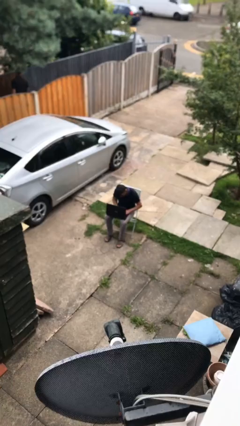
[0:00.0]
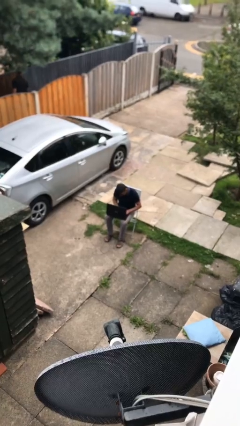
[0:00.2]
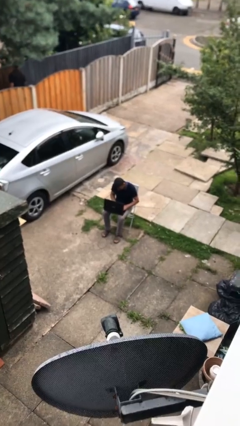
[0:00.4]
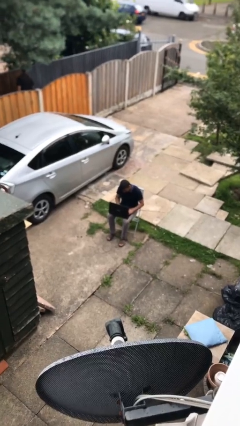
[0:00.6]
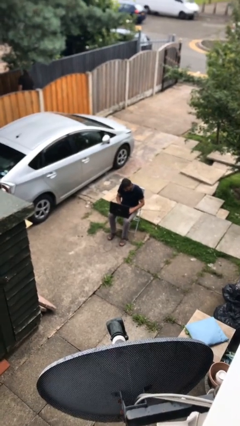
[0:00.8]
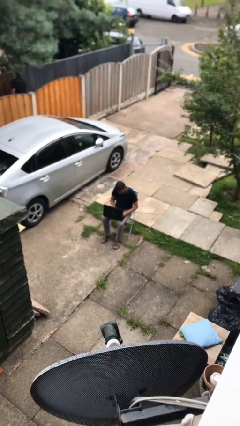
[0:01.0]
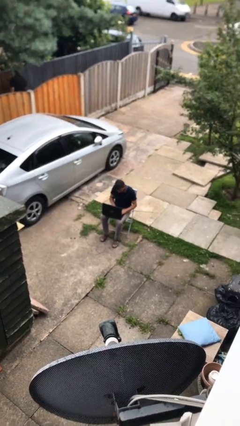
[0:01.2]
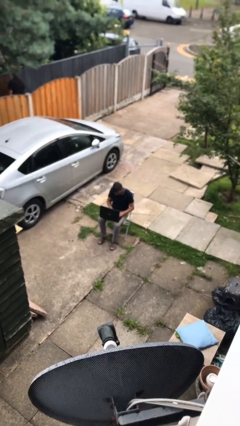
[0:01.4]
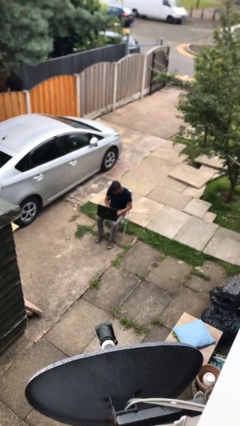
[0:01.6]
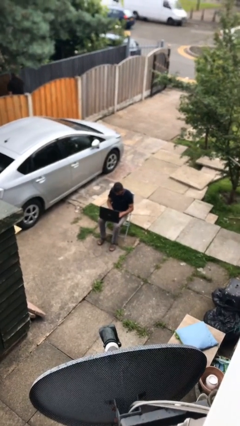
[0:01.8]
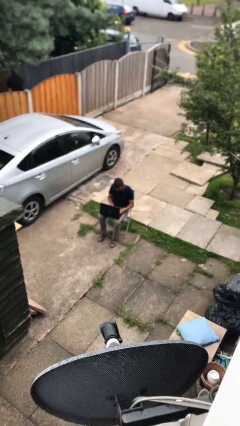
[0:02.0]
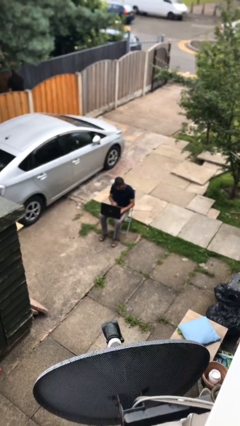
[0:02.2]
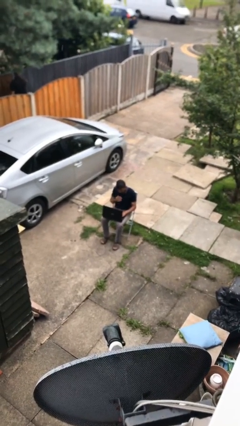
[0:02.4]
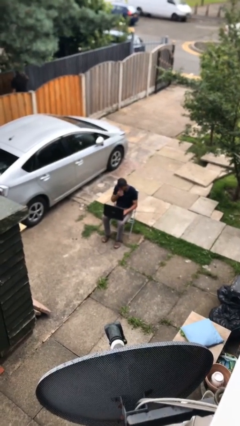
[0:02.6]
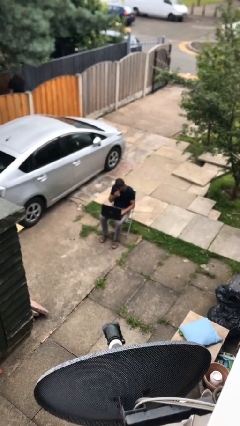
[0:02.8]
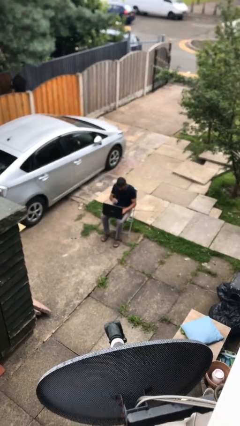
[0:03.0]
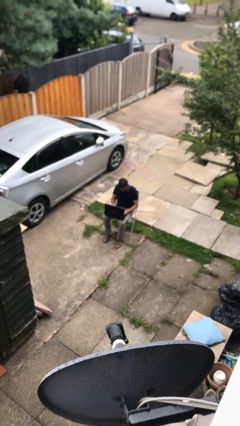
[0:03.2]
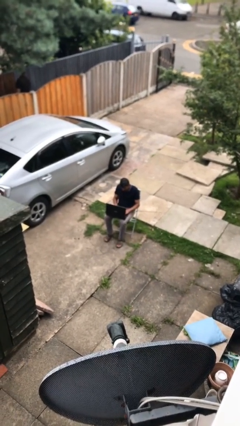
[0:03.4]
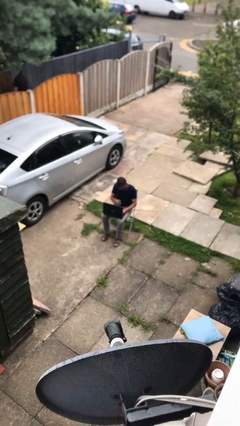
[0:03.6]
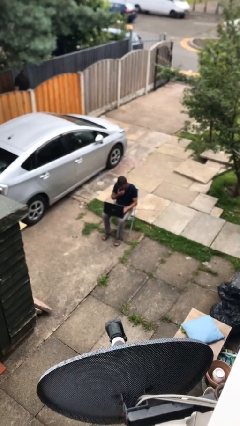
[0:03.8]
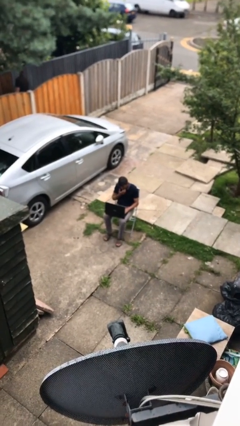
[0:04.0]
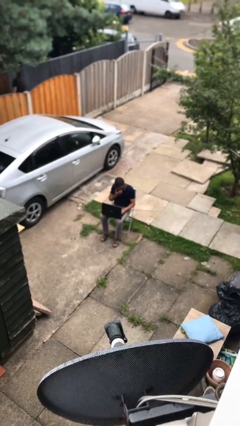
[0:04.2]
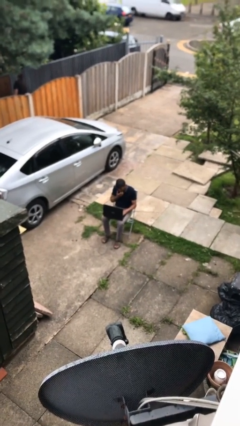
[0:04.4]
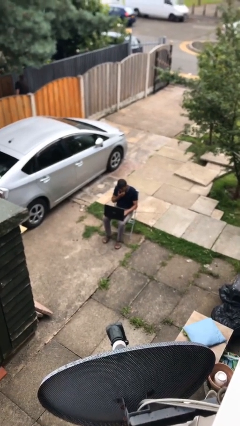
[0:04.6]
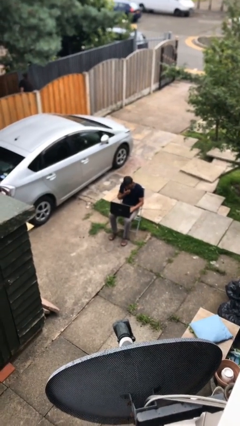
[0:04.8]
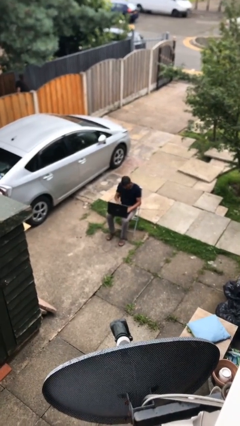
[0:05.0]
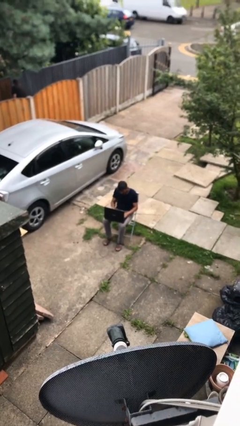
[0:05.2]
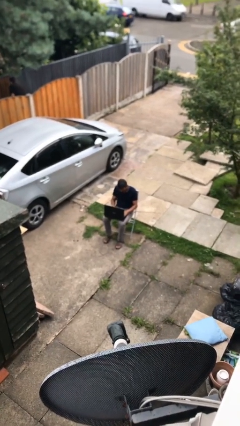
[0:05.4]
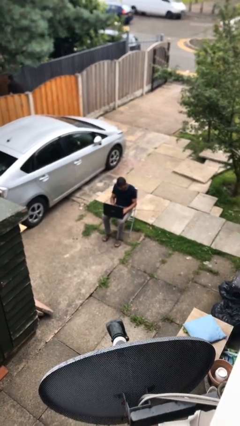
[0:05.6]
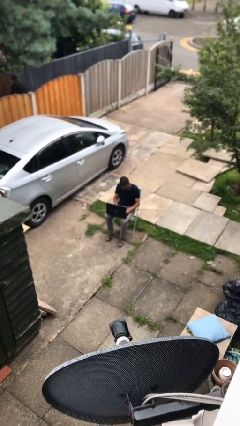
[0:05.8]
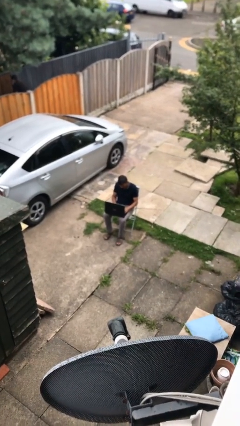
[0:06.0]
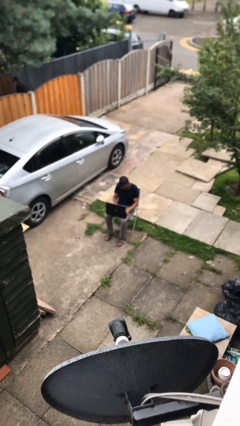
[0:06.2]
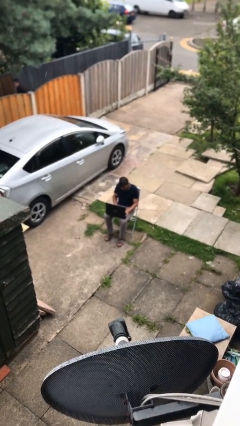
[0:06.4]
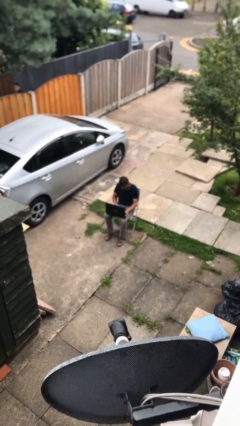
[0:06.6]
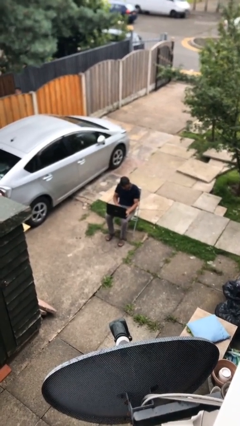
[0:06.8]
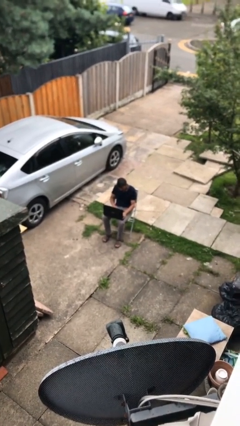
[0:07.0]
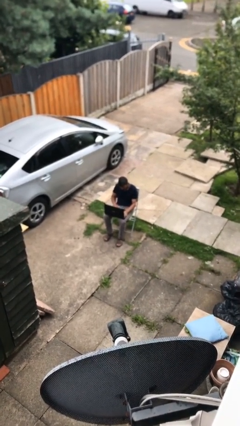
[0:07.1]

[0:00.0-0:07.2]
person interacts with laptop

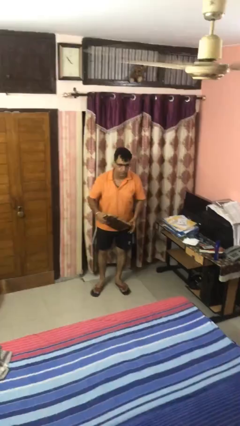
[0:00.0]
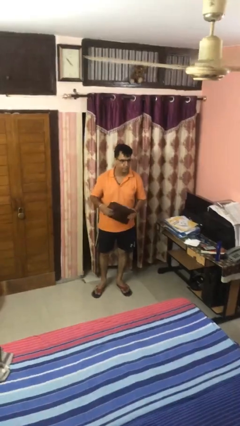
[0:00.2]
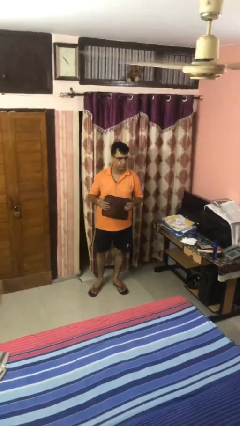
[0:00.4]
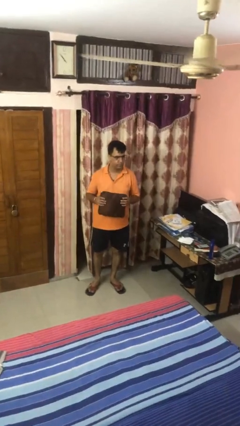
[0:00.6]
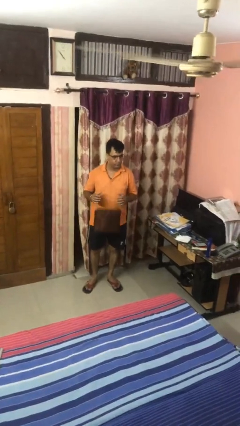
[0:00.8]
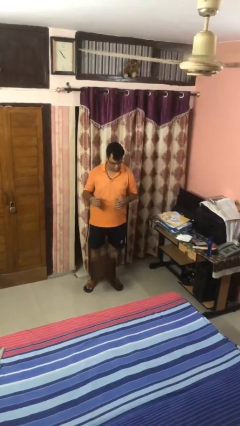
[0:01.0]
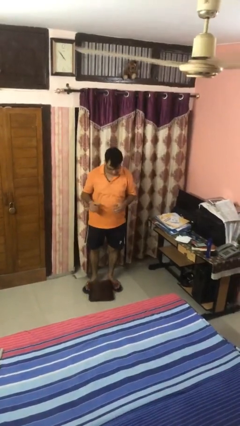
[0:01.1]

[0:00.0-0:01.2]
person drops object

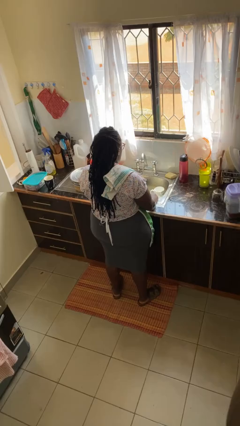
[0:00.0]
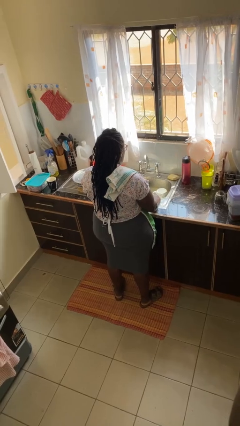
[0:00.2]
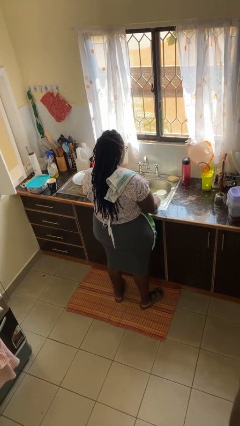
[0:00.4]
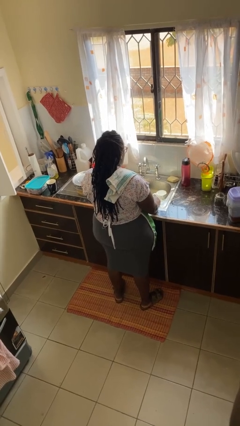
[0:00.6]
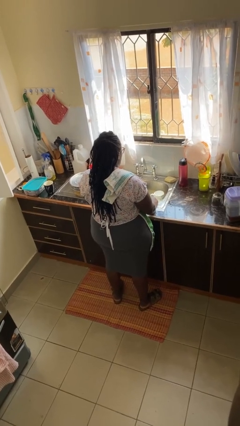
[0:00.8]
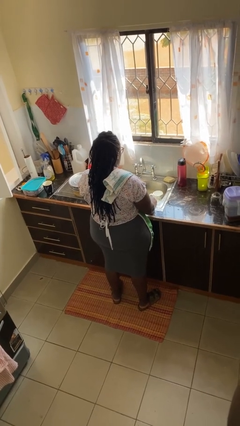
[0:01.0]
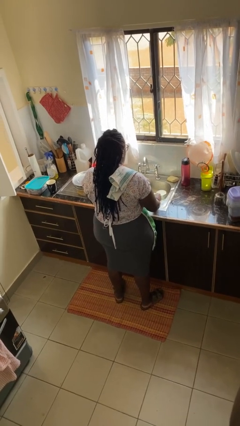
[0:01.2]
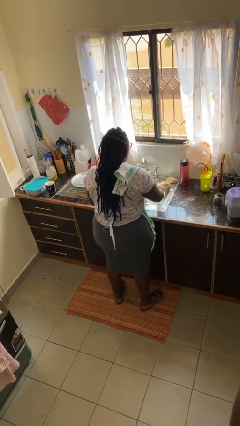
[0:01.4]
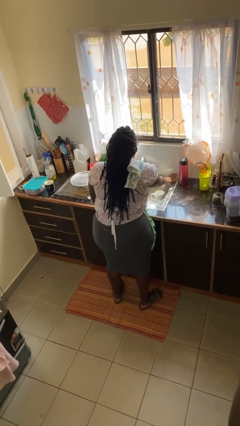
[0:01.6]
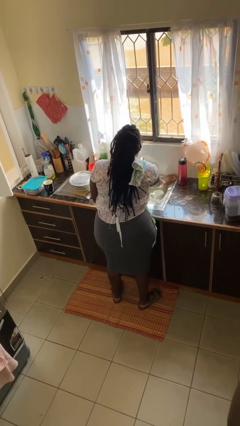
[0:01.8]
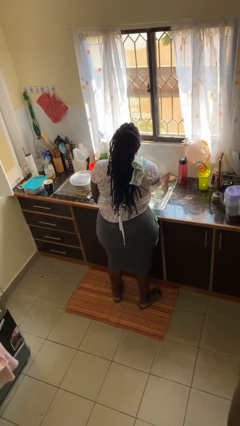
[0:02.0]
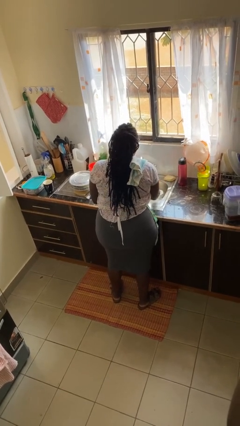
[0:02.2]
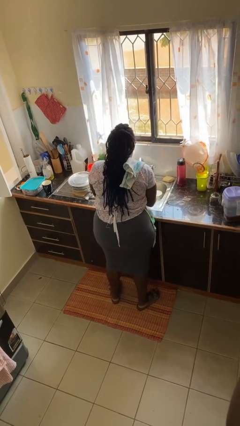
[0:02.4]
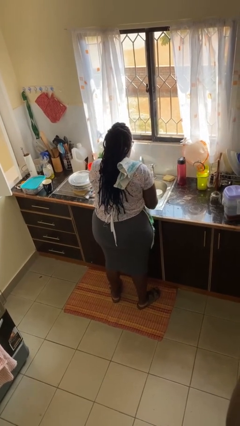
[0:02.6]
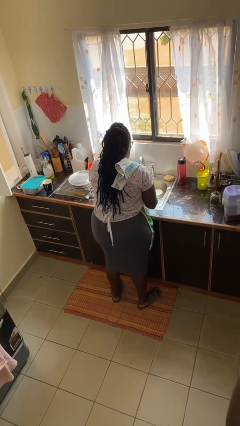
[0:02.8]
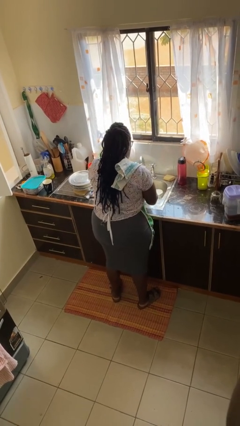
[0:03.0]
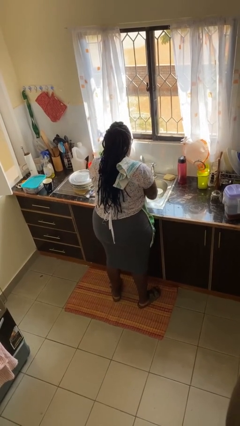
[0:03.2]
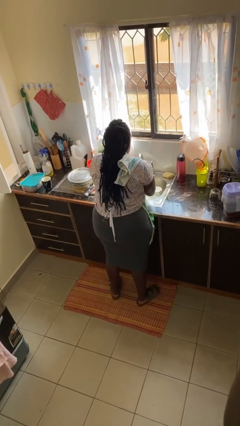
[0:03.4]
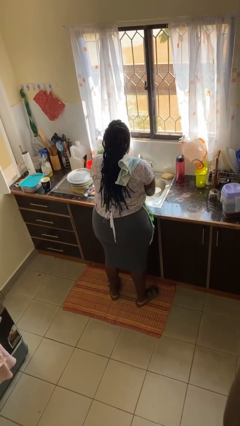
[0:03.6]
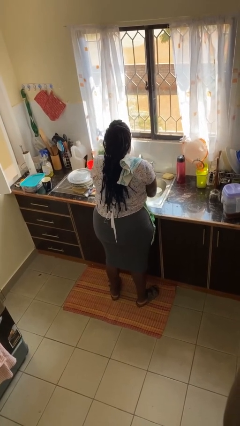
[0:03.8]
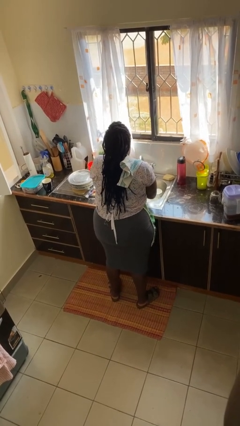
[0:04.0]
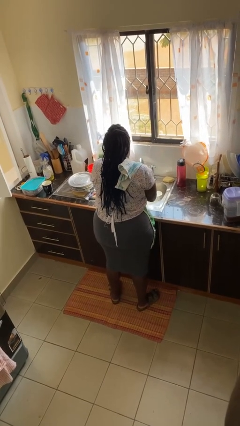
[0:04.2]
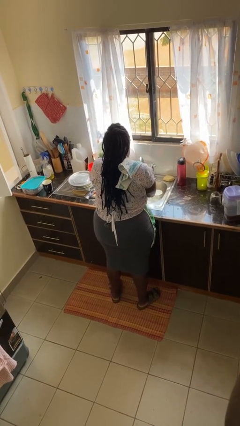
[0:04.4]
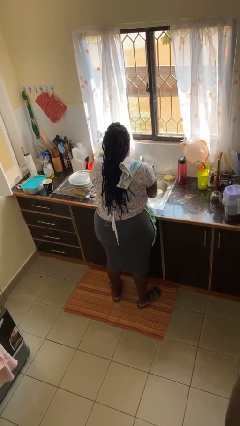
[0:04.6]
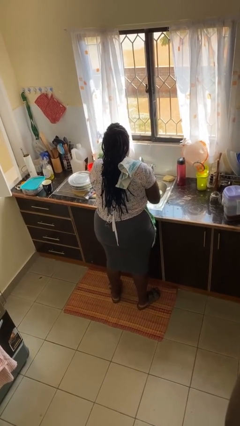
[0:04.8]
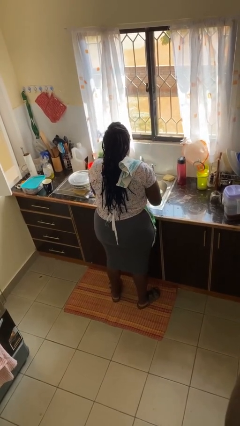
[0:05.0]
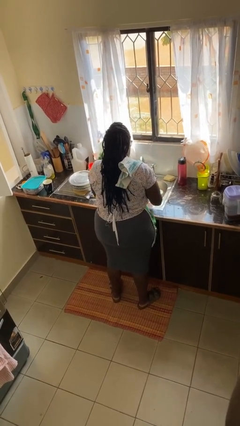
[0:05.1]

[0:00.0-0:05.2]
person washes hands

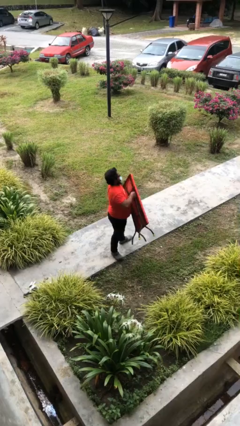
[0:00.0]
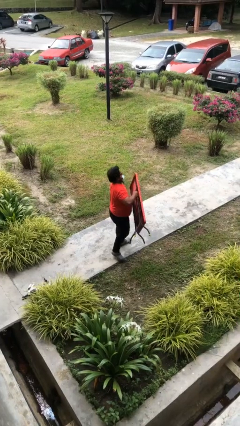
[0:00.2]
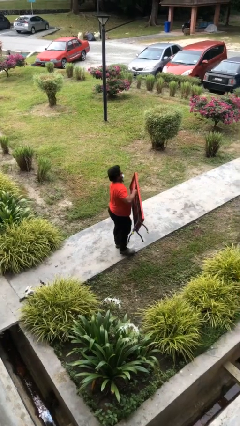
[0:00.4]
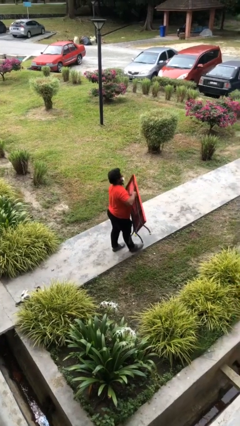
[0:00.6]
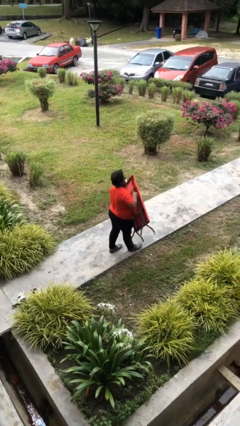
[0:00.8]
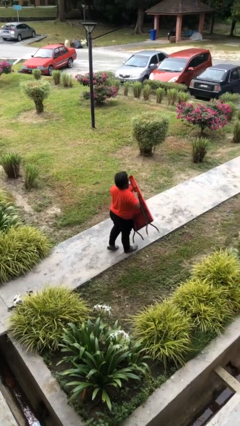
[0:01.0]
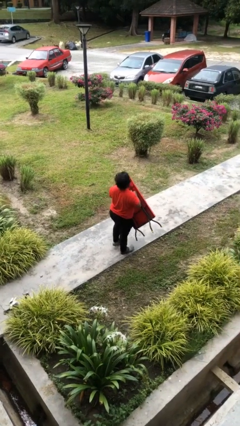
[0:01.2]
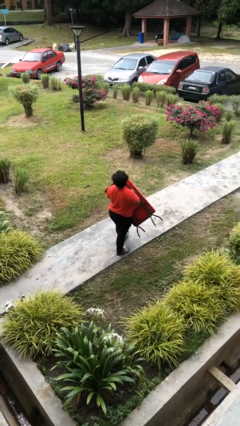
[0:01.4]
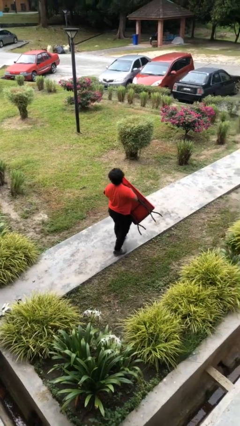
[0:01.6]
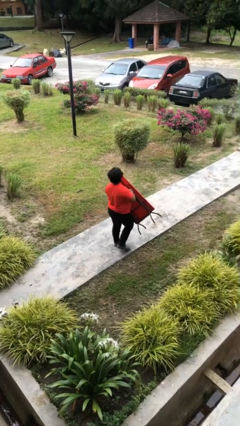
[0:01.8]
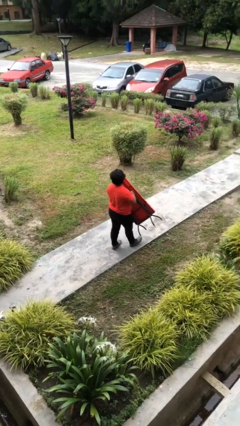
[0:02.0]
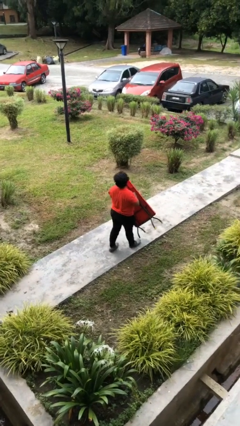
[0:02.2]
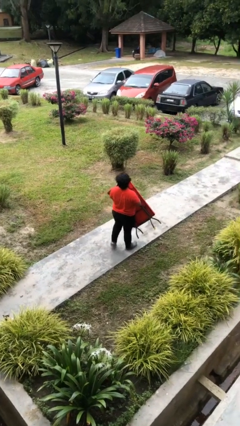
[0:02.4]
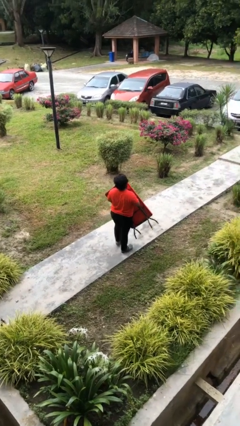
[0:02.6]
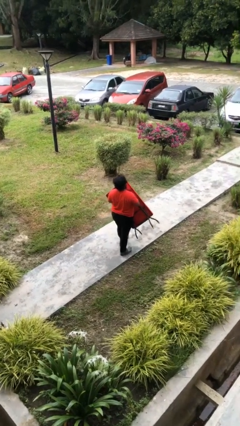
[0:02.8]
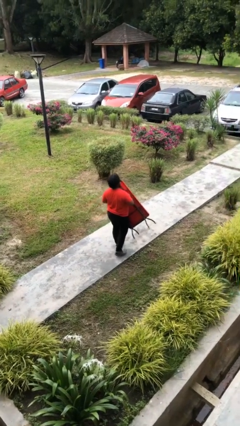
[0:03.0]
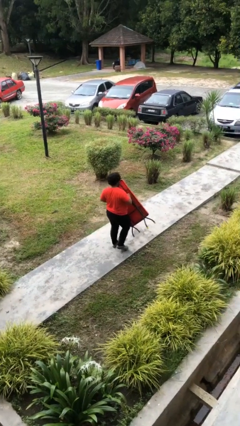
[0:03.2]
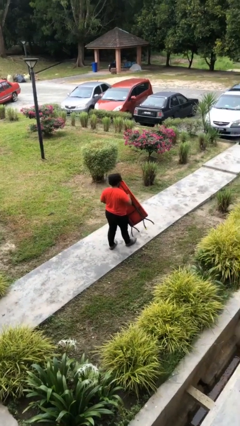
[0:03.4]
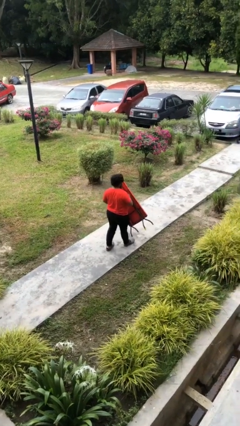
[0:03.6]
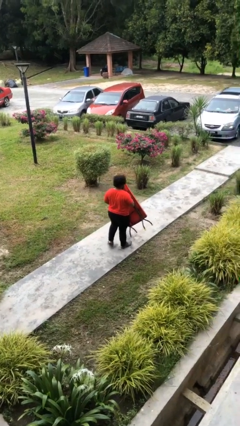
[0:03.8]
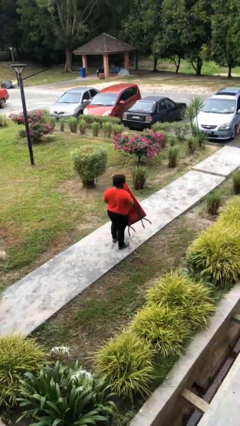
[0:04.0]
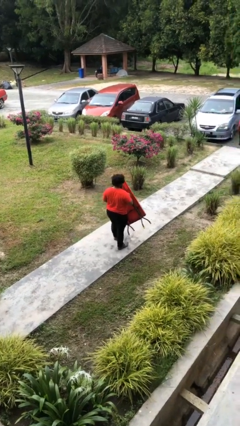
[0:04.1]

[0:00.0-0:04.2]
person carries heavy object
